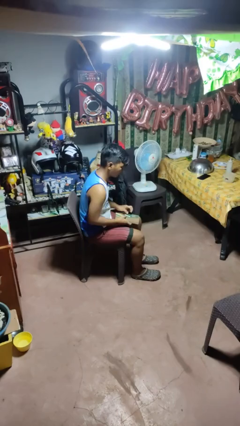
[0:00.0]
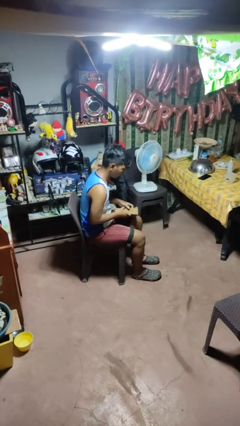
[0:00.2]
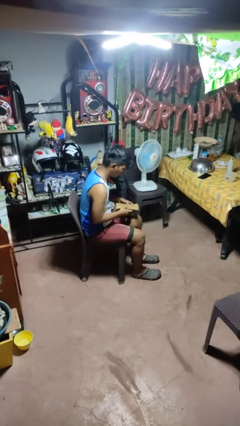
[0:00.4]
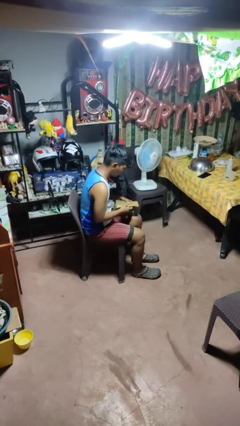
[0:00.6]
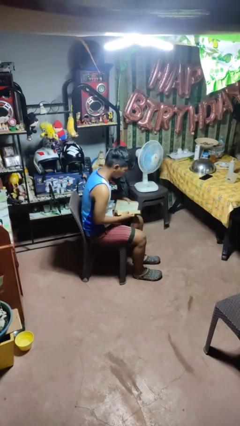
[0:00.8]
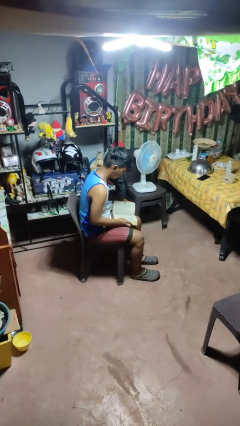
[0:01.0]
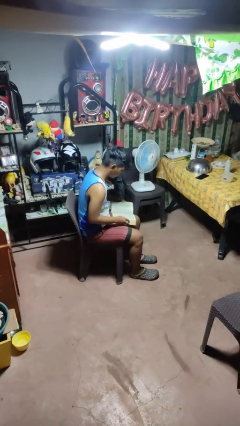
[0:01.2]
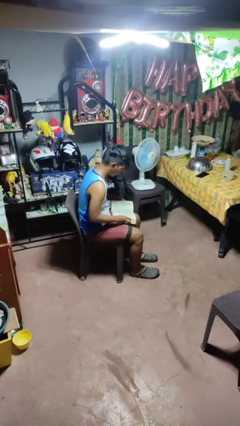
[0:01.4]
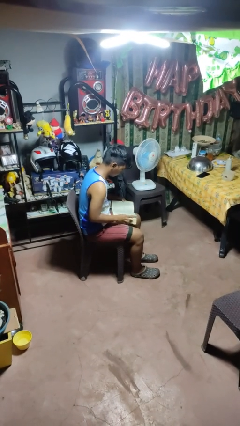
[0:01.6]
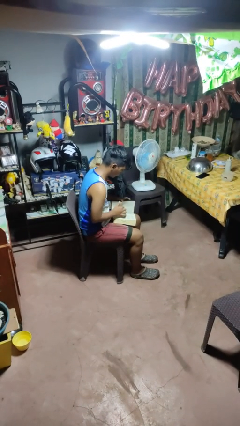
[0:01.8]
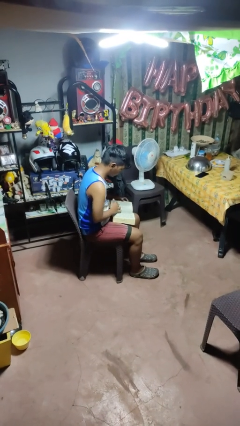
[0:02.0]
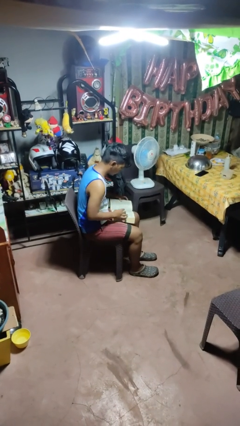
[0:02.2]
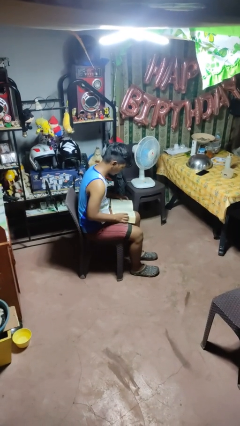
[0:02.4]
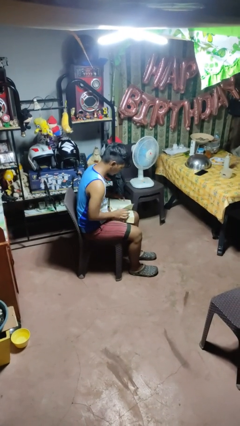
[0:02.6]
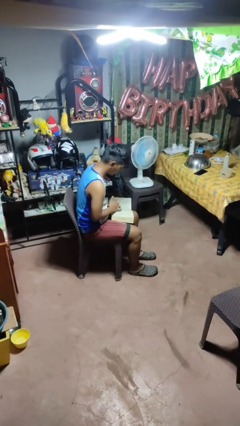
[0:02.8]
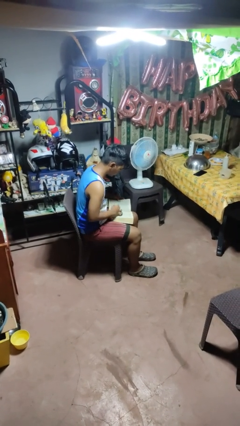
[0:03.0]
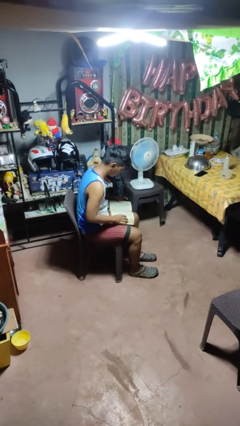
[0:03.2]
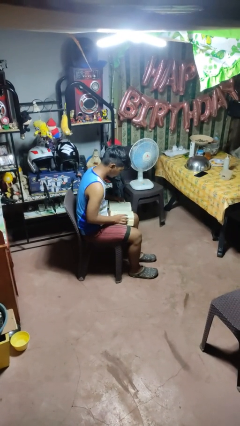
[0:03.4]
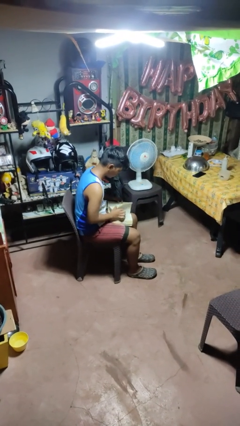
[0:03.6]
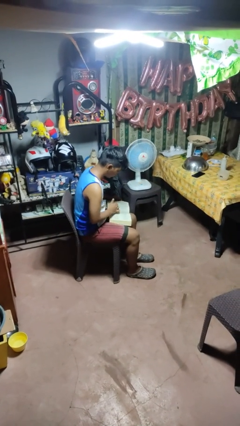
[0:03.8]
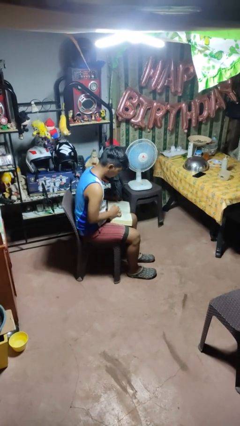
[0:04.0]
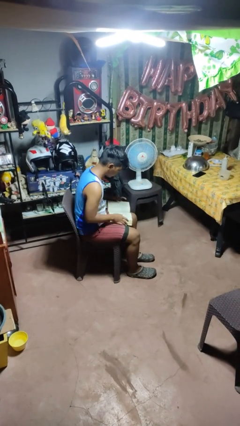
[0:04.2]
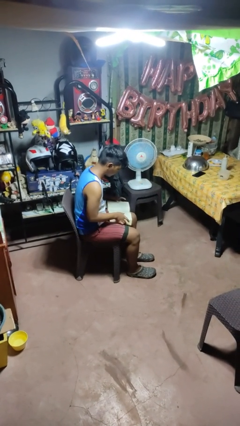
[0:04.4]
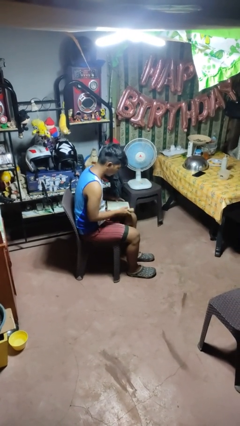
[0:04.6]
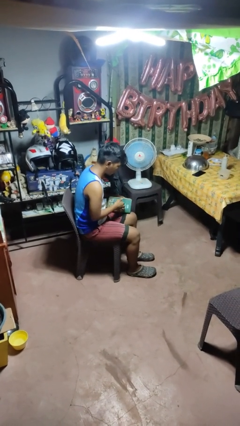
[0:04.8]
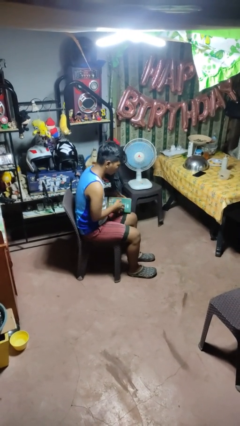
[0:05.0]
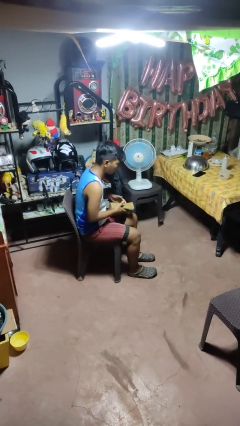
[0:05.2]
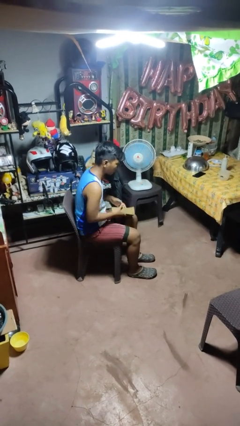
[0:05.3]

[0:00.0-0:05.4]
person reads book

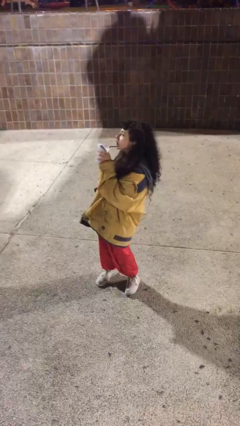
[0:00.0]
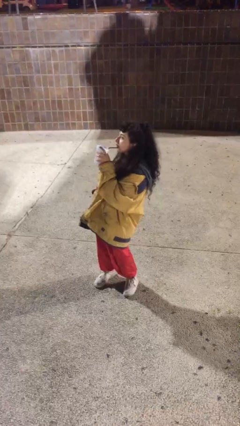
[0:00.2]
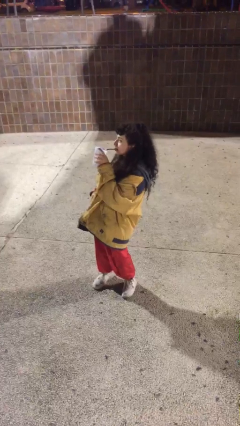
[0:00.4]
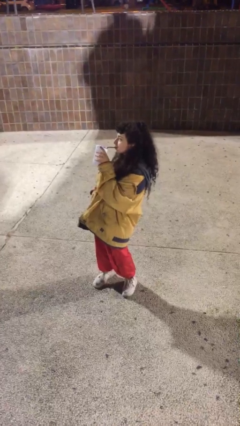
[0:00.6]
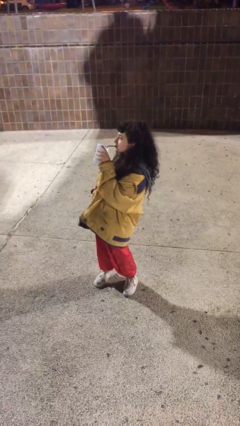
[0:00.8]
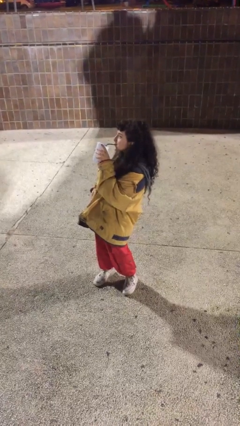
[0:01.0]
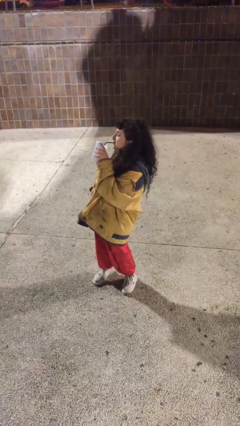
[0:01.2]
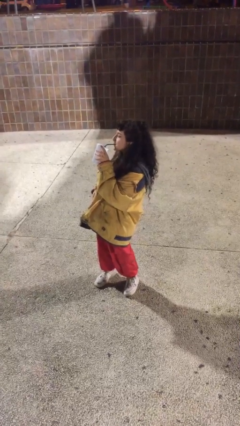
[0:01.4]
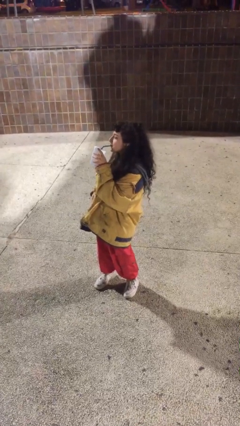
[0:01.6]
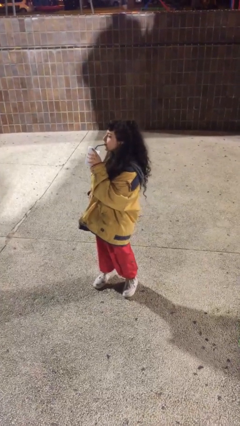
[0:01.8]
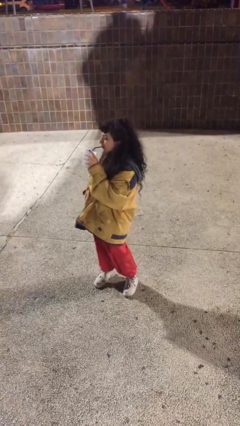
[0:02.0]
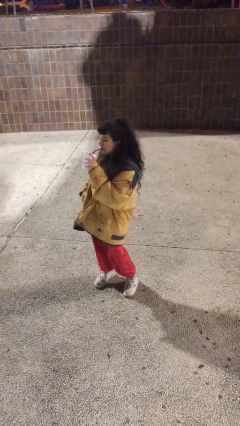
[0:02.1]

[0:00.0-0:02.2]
person drinks from straw

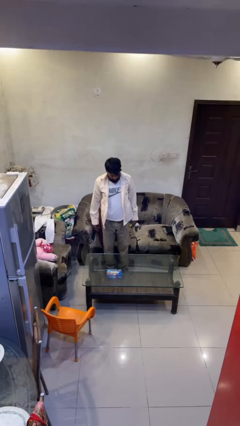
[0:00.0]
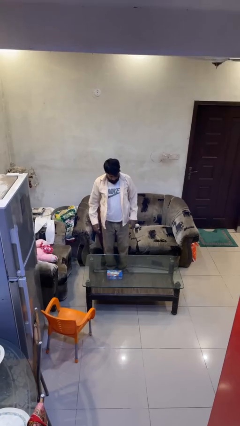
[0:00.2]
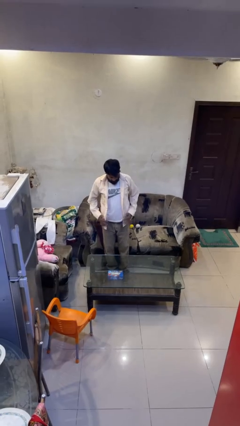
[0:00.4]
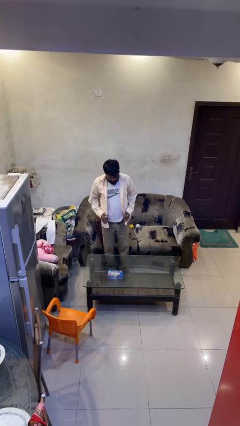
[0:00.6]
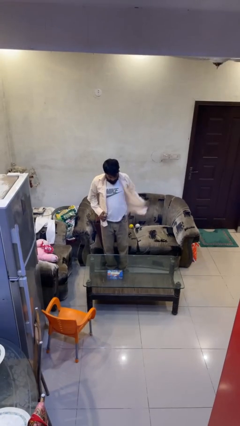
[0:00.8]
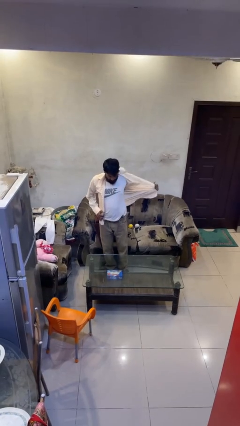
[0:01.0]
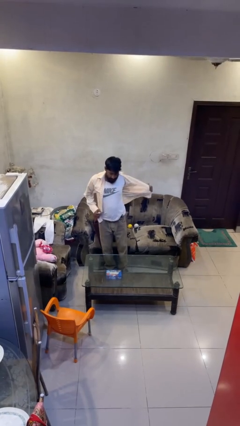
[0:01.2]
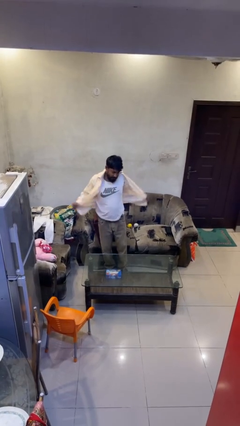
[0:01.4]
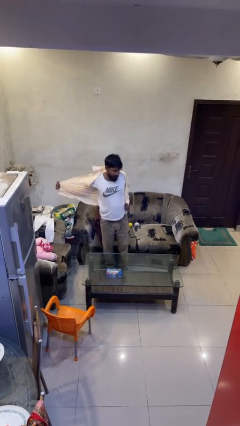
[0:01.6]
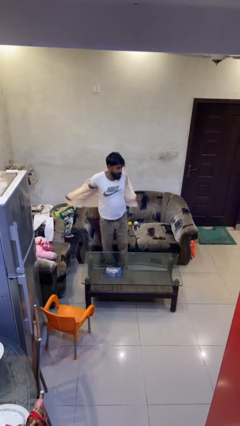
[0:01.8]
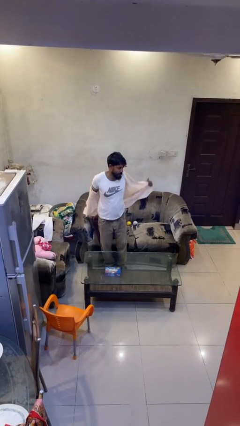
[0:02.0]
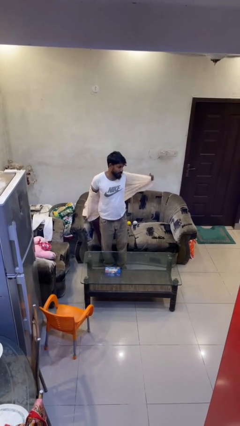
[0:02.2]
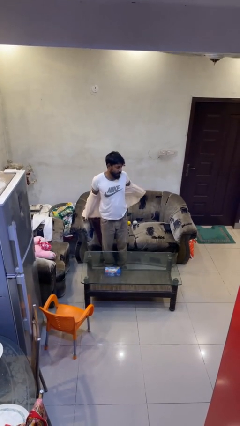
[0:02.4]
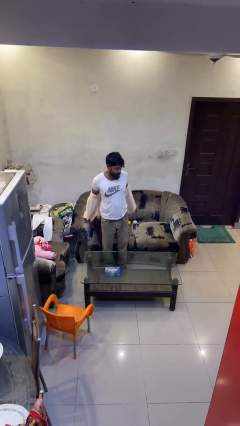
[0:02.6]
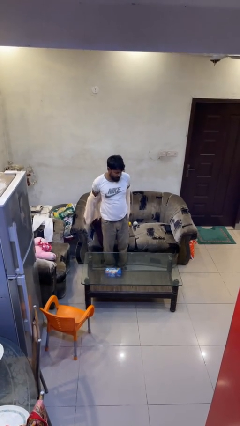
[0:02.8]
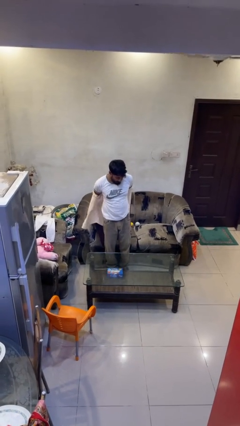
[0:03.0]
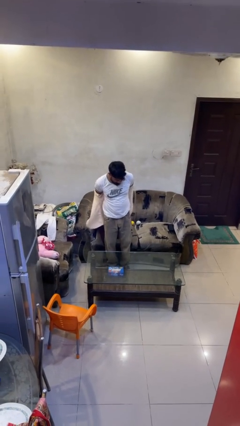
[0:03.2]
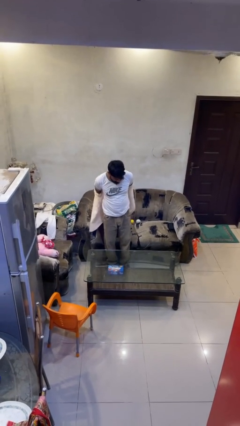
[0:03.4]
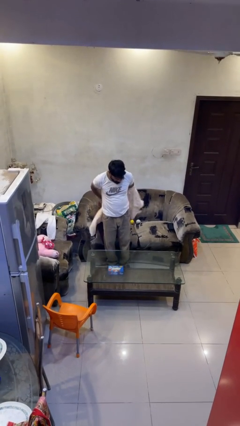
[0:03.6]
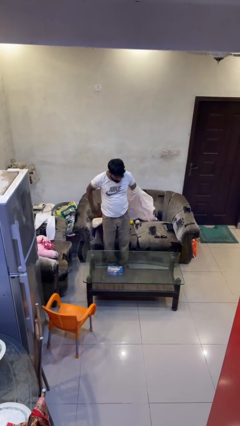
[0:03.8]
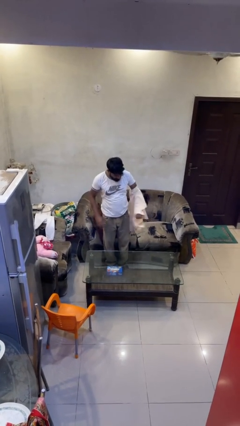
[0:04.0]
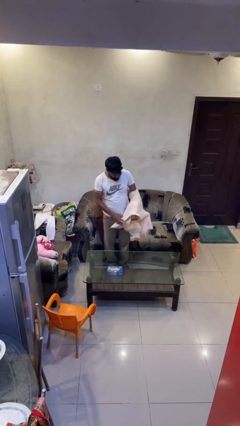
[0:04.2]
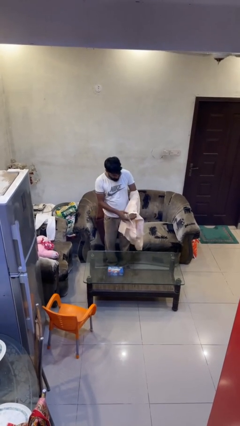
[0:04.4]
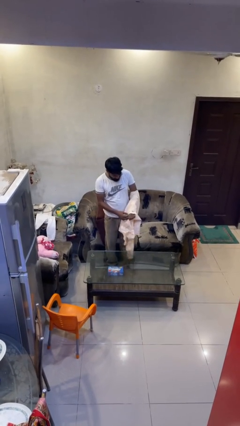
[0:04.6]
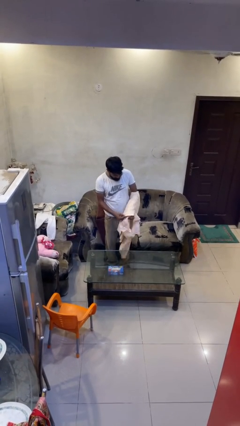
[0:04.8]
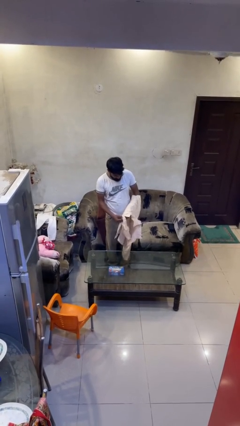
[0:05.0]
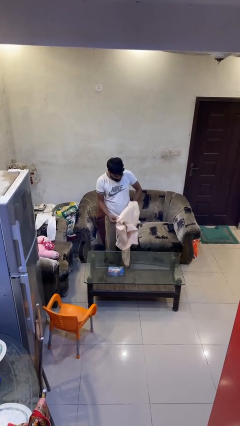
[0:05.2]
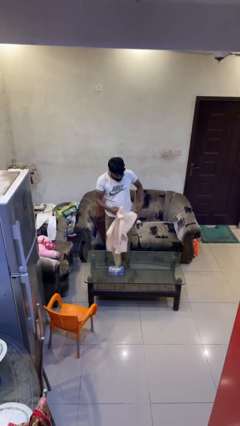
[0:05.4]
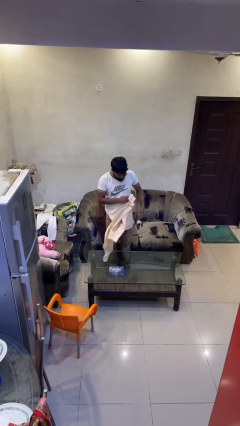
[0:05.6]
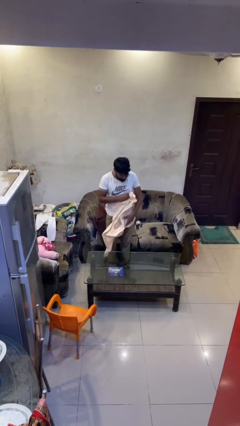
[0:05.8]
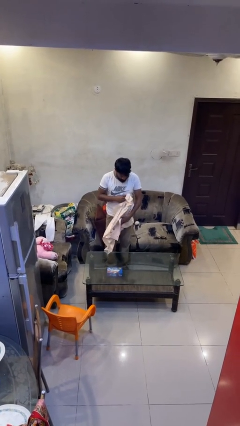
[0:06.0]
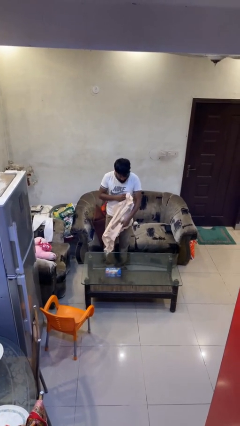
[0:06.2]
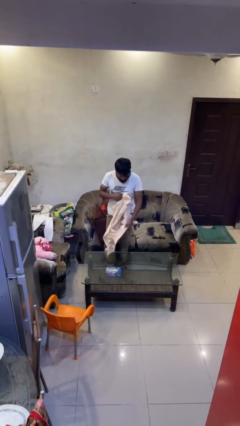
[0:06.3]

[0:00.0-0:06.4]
person takes off shirt

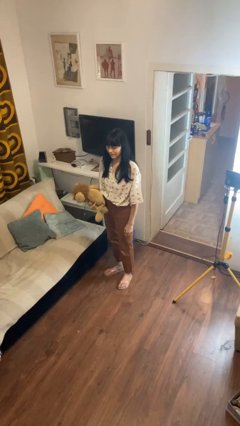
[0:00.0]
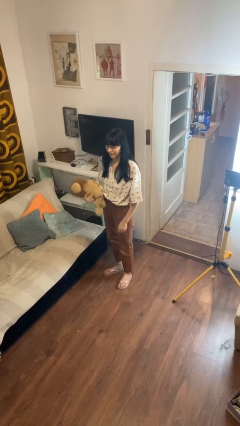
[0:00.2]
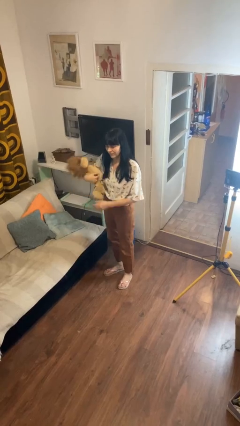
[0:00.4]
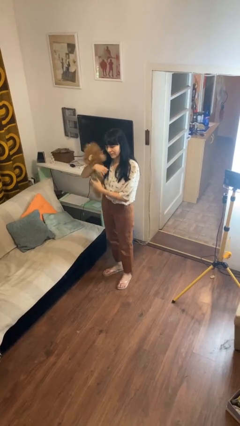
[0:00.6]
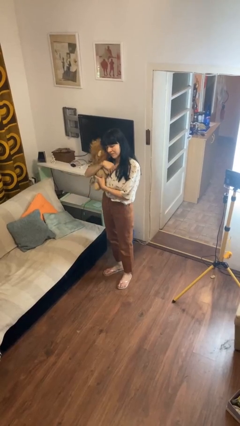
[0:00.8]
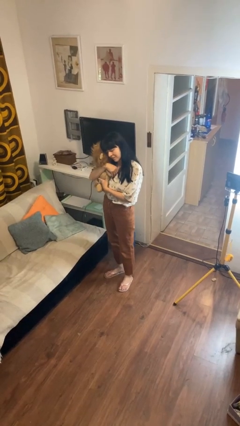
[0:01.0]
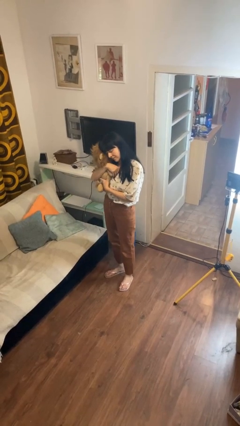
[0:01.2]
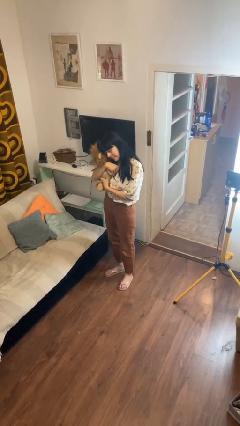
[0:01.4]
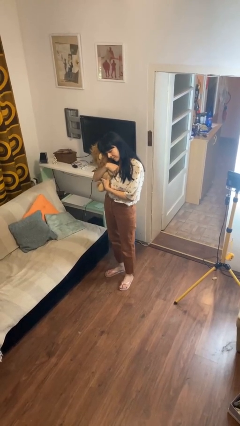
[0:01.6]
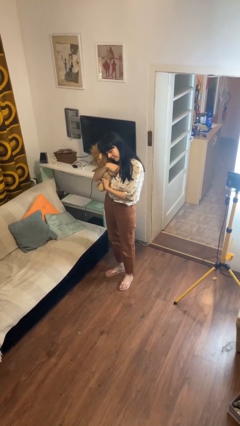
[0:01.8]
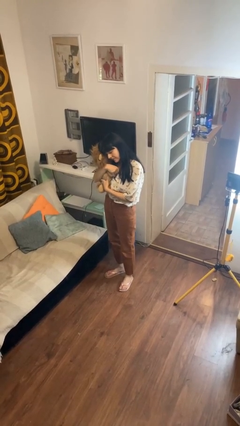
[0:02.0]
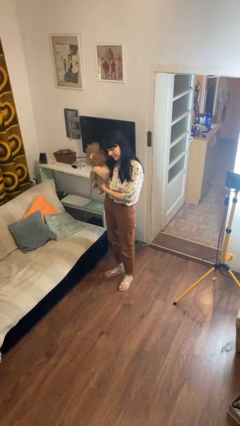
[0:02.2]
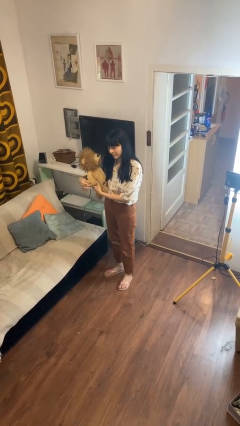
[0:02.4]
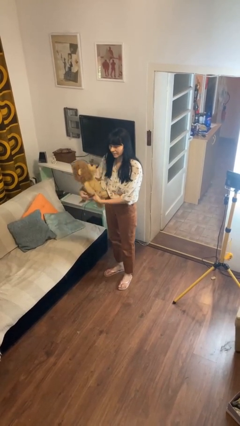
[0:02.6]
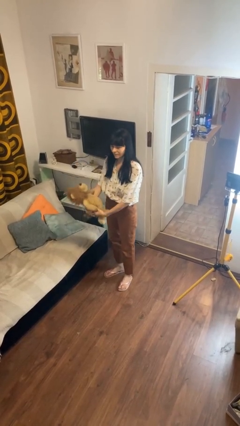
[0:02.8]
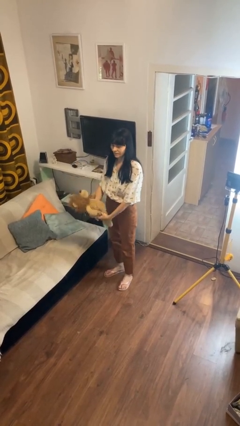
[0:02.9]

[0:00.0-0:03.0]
person hugs stuffed animal

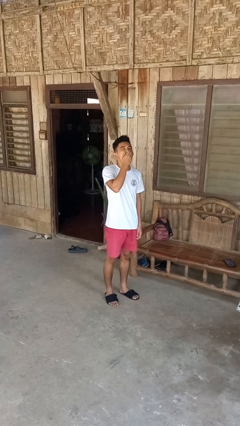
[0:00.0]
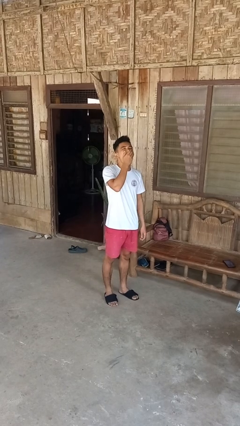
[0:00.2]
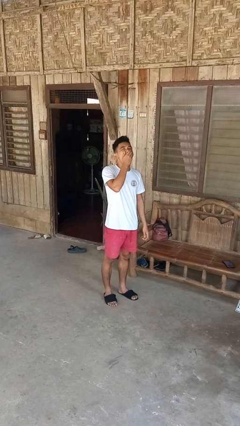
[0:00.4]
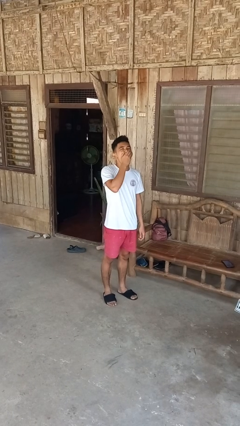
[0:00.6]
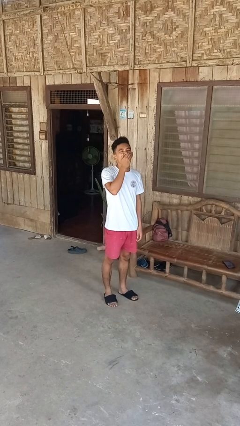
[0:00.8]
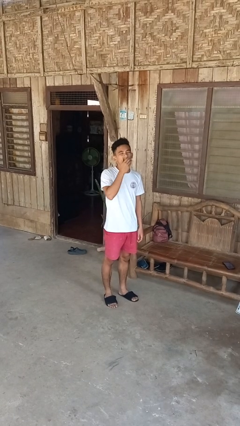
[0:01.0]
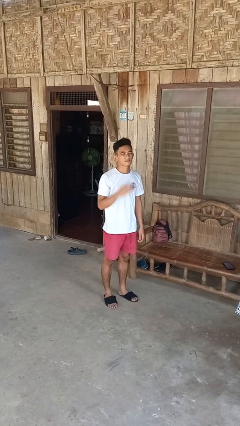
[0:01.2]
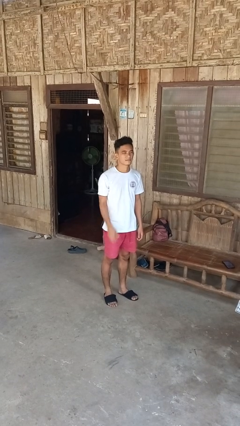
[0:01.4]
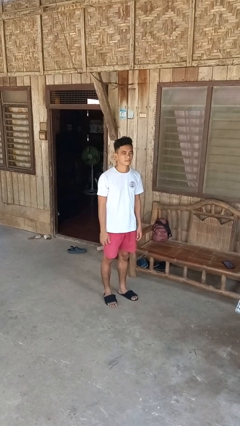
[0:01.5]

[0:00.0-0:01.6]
person yawns
